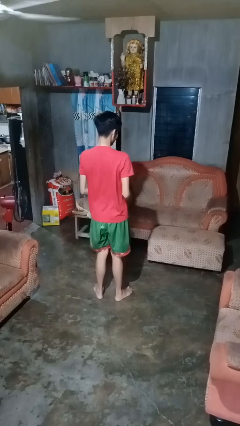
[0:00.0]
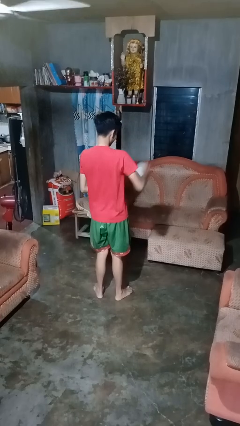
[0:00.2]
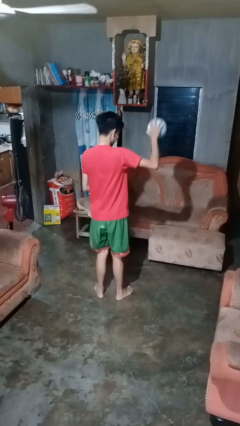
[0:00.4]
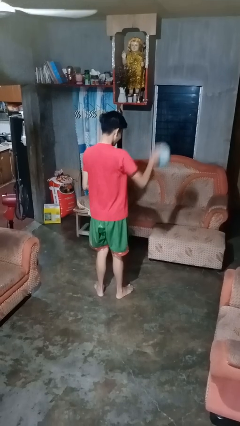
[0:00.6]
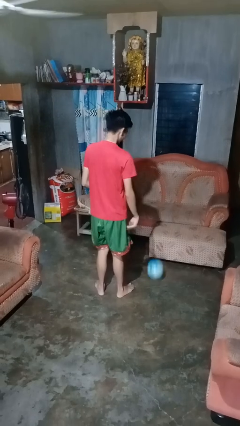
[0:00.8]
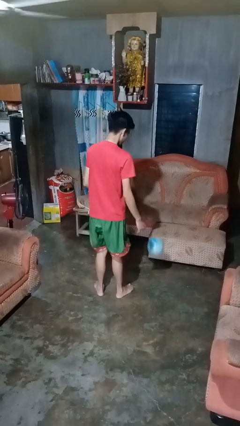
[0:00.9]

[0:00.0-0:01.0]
person bounces ball on floor

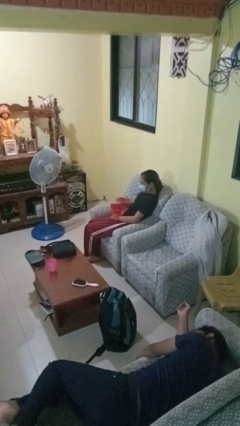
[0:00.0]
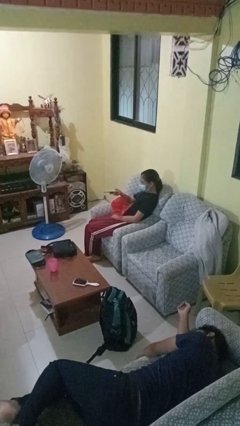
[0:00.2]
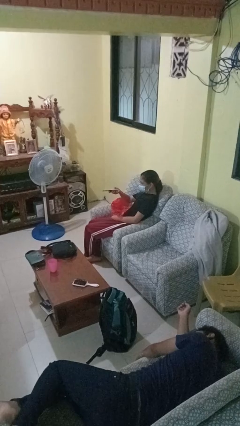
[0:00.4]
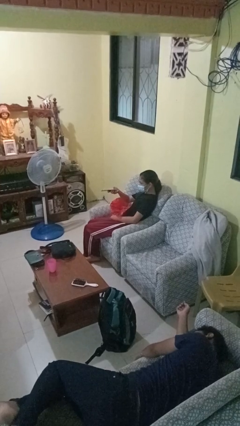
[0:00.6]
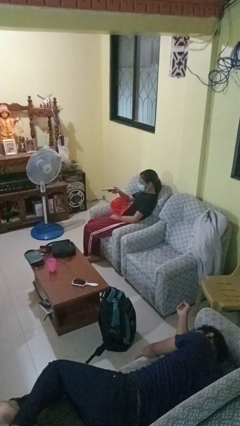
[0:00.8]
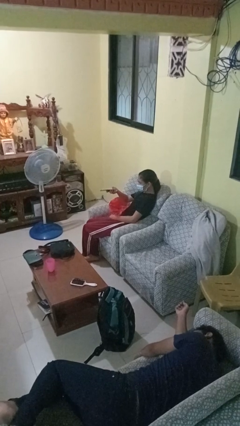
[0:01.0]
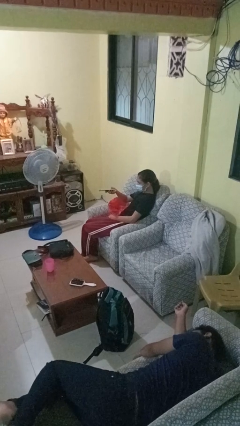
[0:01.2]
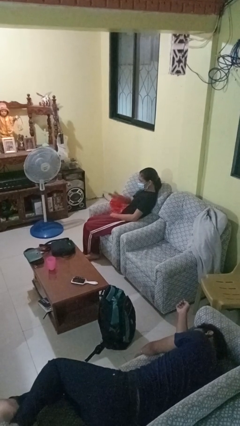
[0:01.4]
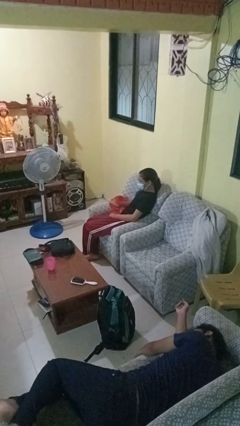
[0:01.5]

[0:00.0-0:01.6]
person uses television remote

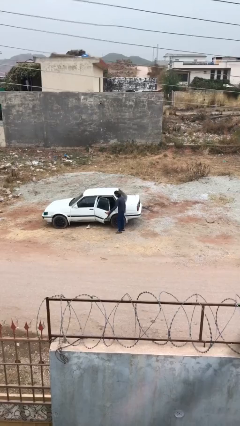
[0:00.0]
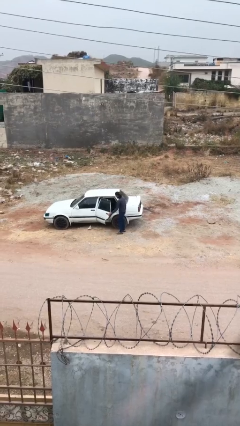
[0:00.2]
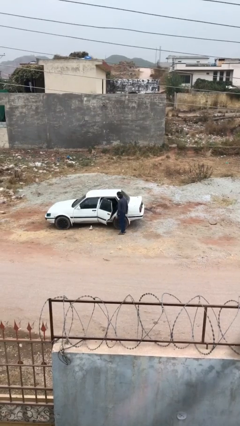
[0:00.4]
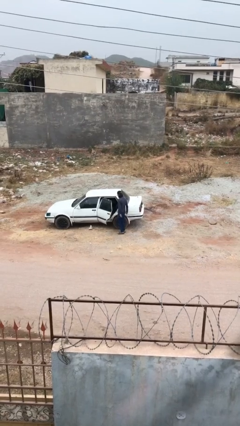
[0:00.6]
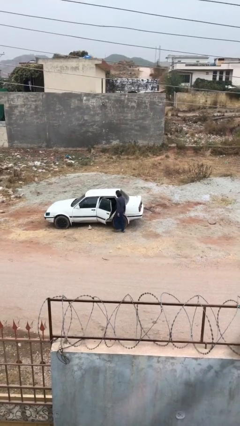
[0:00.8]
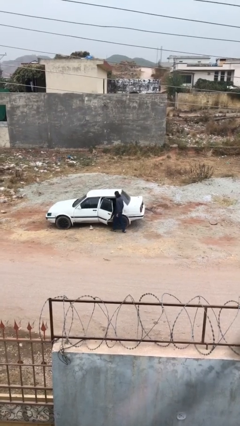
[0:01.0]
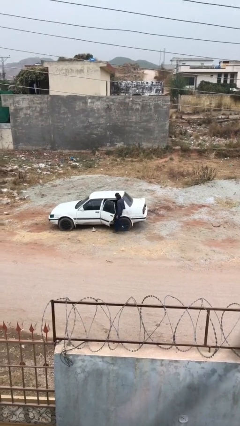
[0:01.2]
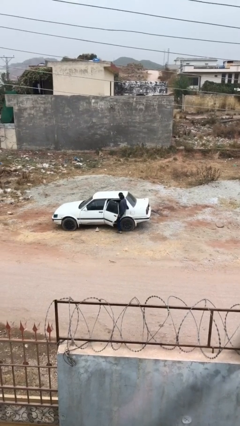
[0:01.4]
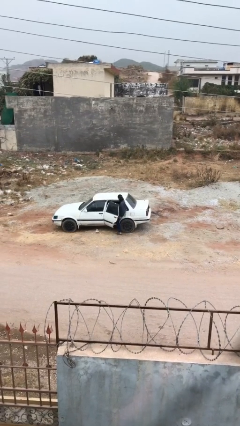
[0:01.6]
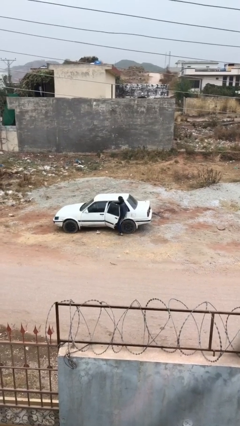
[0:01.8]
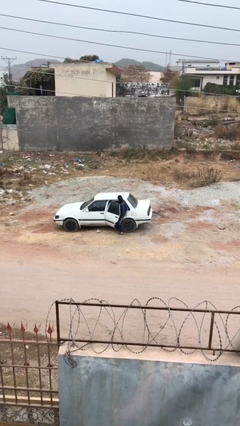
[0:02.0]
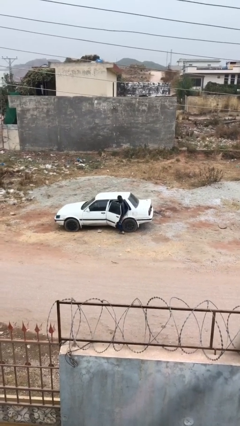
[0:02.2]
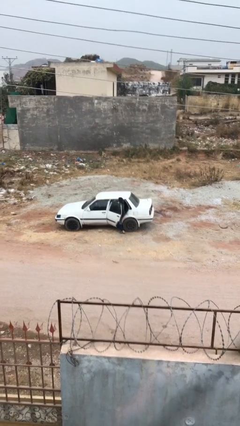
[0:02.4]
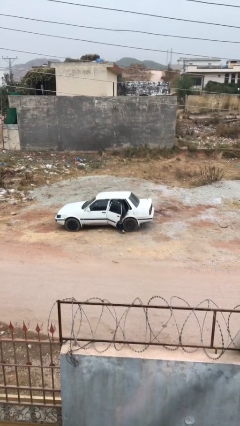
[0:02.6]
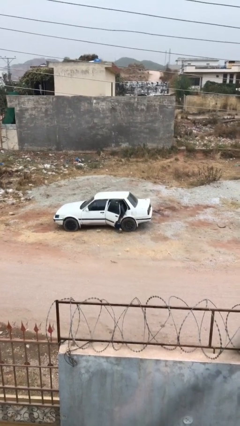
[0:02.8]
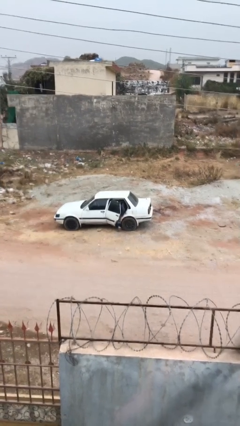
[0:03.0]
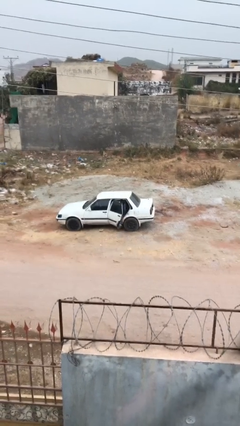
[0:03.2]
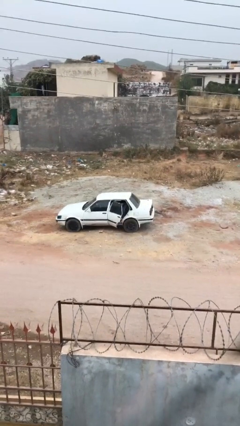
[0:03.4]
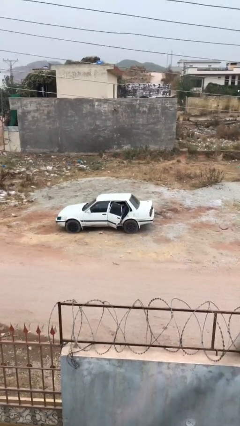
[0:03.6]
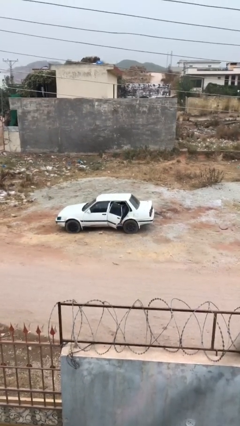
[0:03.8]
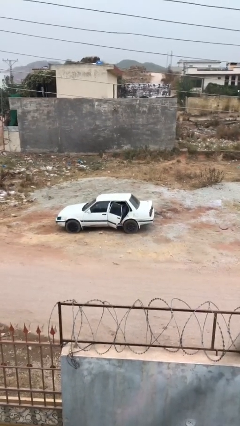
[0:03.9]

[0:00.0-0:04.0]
person enters car

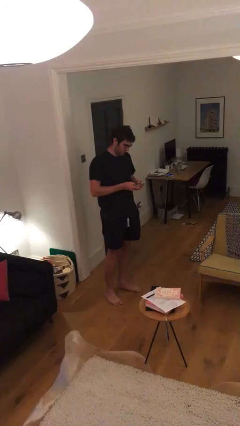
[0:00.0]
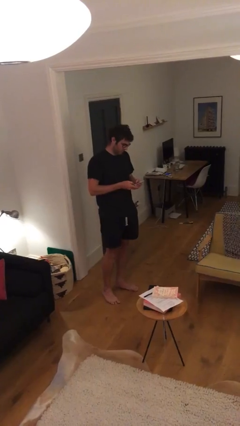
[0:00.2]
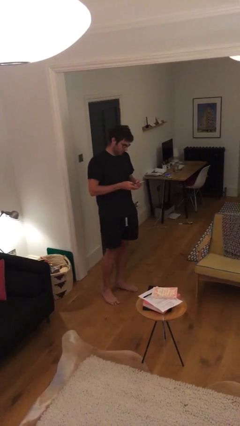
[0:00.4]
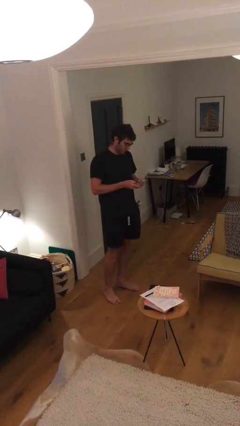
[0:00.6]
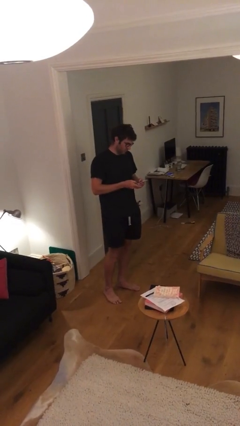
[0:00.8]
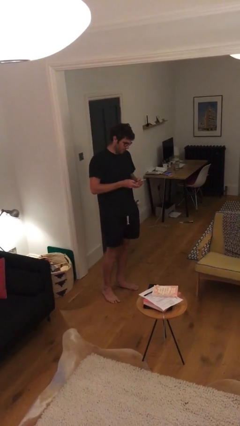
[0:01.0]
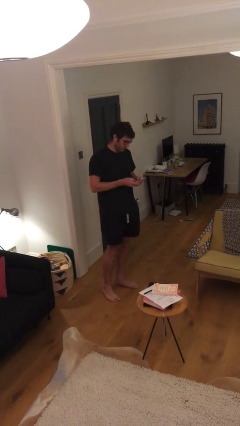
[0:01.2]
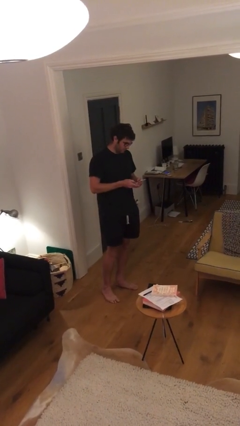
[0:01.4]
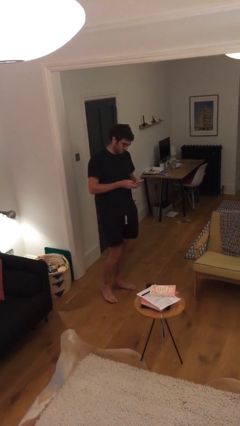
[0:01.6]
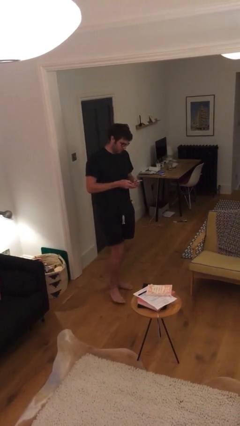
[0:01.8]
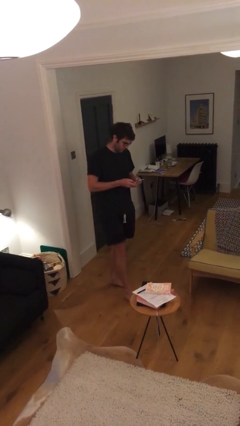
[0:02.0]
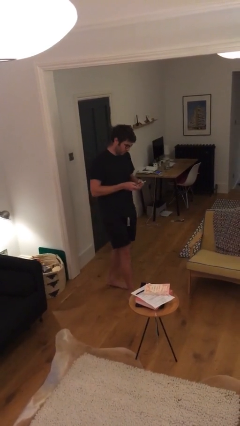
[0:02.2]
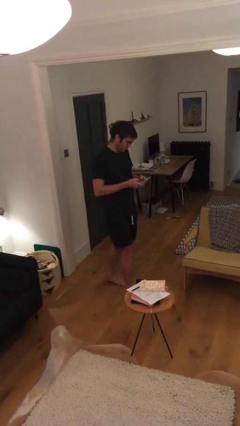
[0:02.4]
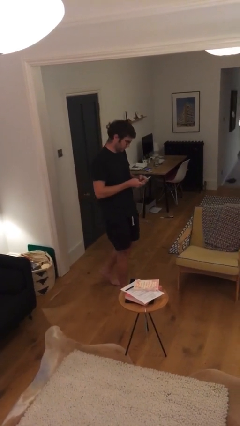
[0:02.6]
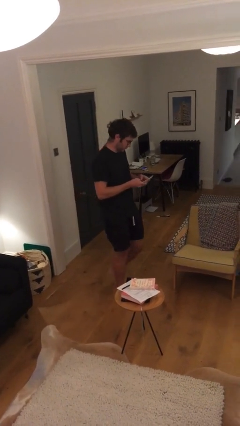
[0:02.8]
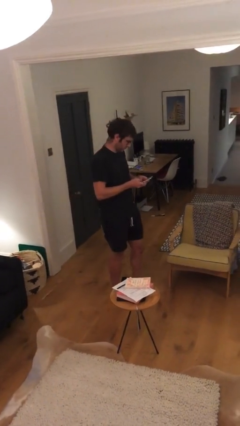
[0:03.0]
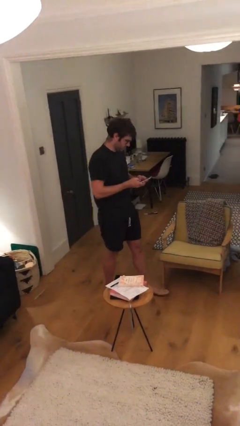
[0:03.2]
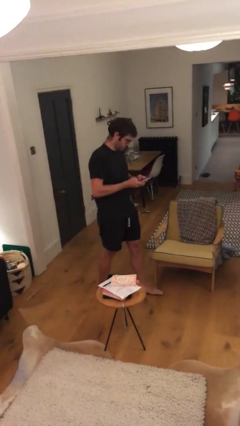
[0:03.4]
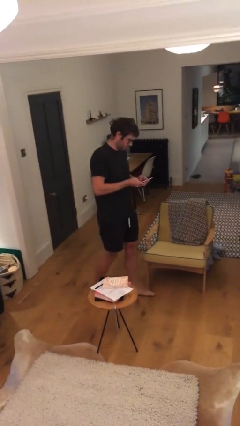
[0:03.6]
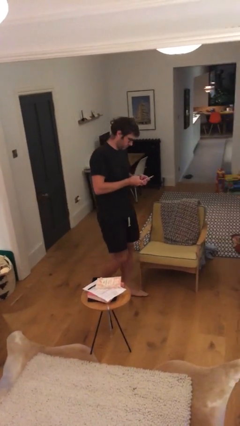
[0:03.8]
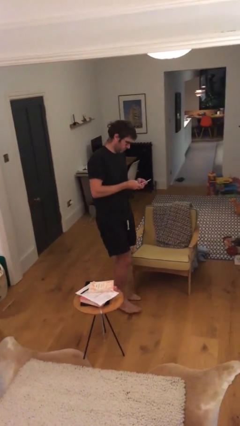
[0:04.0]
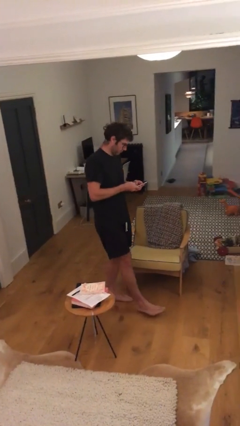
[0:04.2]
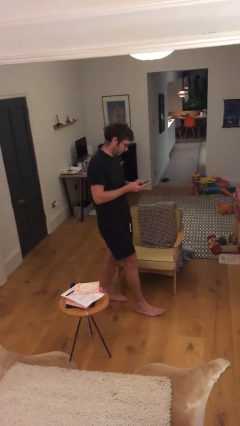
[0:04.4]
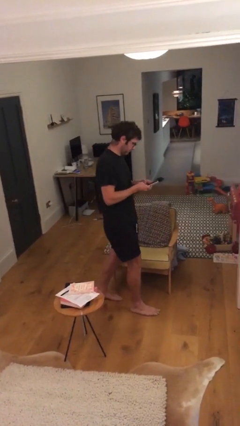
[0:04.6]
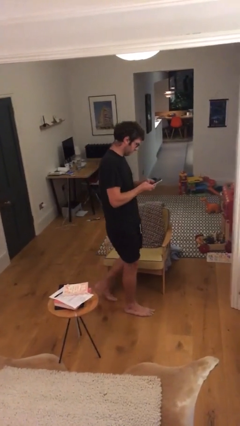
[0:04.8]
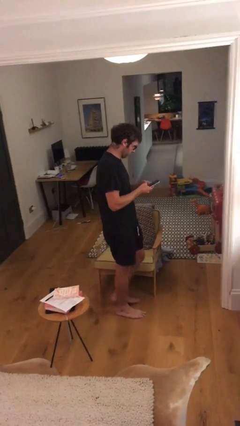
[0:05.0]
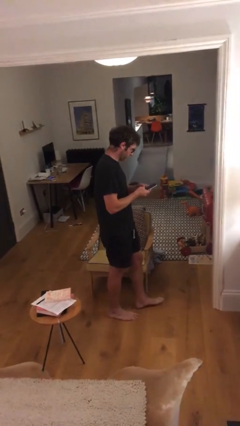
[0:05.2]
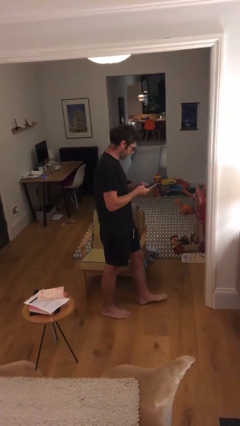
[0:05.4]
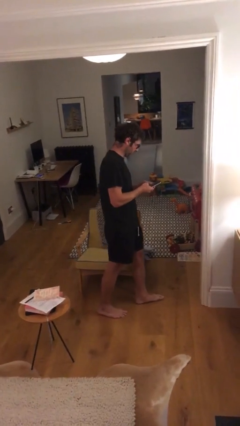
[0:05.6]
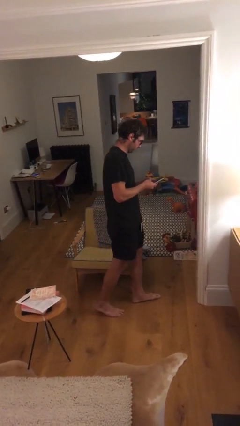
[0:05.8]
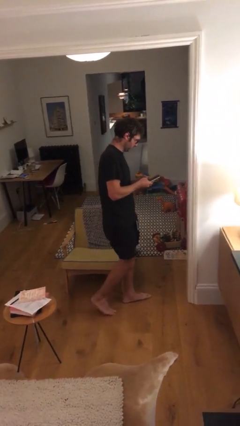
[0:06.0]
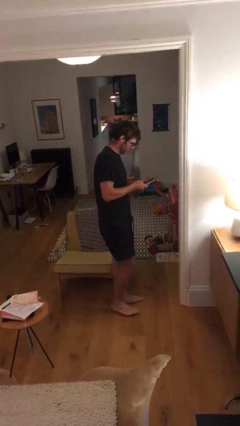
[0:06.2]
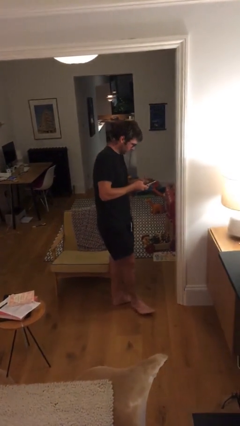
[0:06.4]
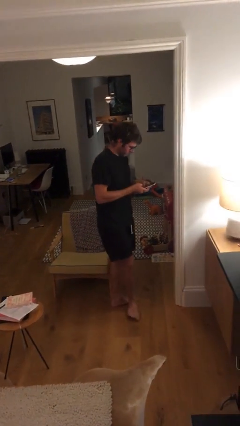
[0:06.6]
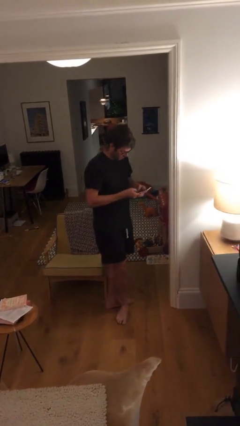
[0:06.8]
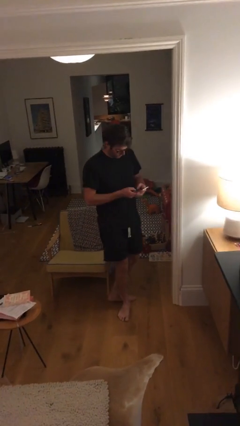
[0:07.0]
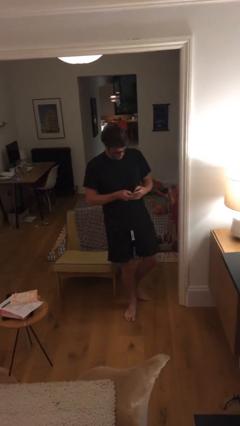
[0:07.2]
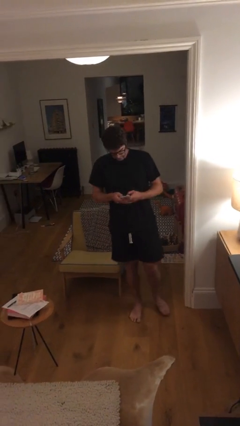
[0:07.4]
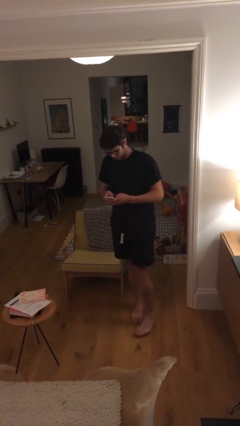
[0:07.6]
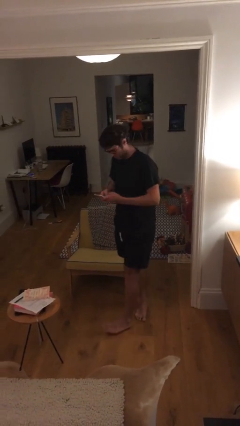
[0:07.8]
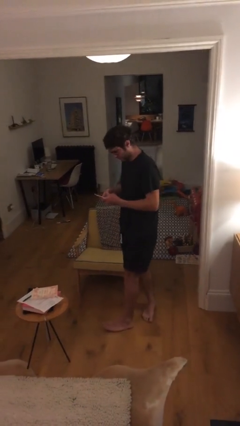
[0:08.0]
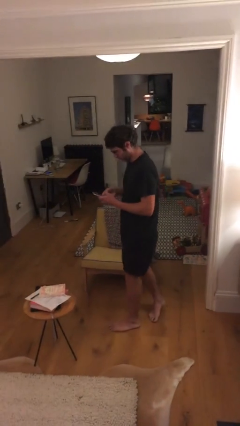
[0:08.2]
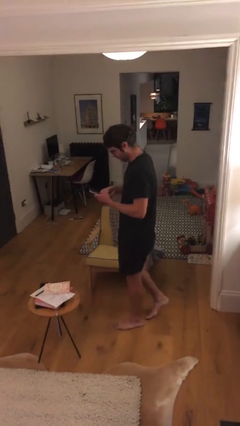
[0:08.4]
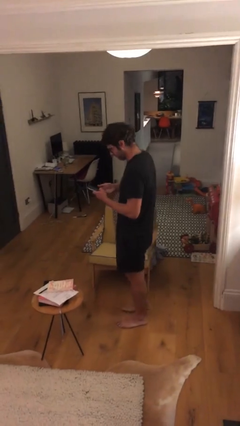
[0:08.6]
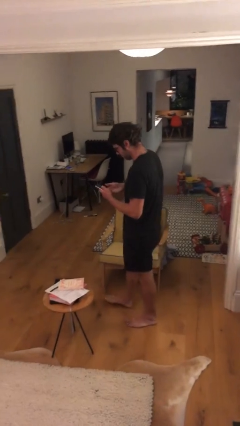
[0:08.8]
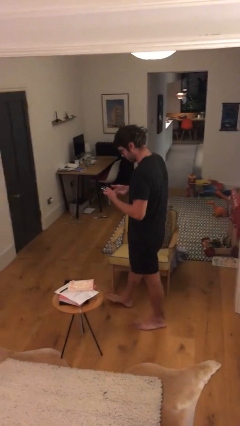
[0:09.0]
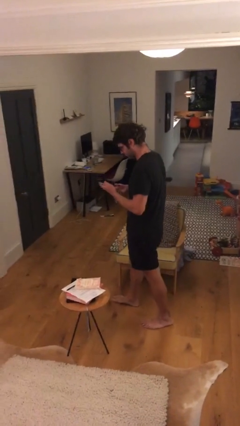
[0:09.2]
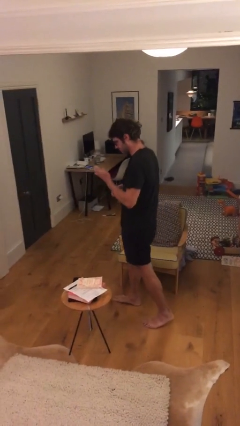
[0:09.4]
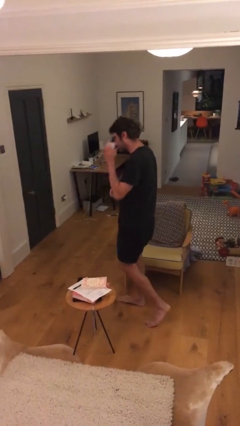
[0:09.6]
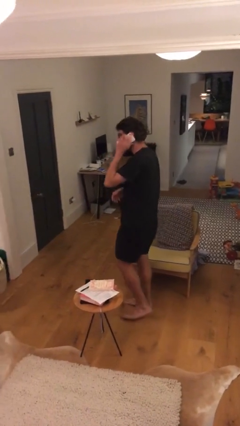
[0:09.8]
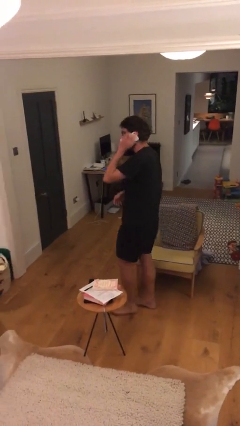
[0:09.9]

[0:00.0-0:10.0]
person texts on phone

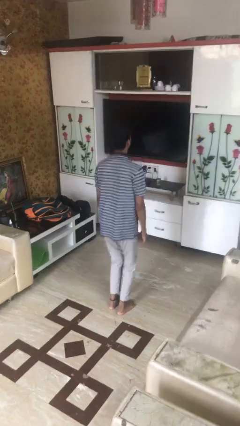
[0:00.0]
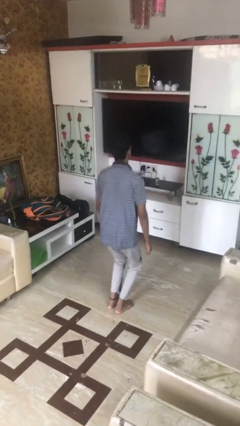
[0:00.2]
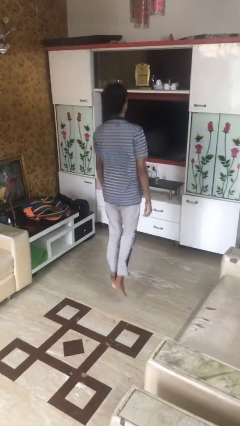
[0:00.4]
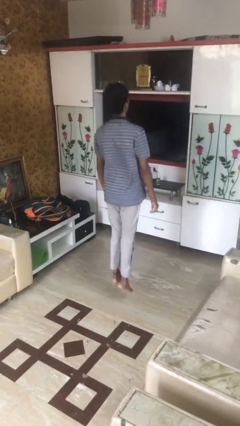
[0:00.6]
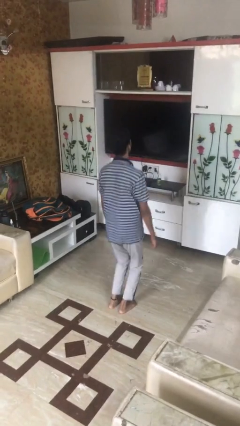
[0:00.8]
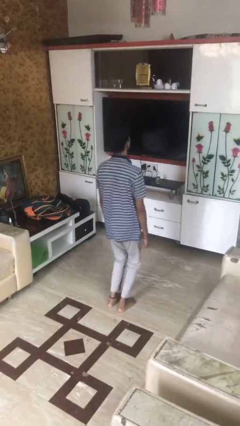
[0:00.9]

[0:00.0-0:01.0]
person jumps

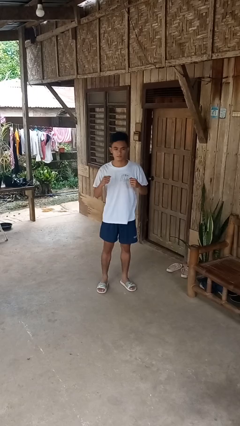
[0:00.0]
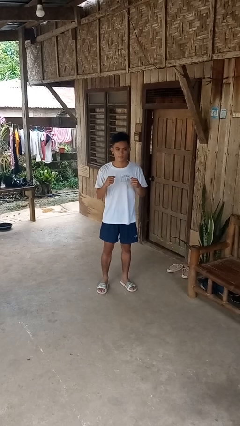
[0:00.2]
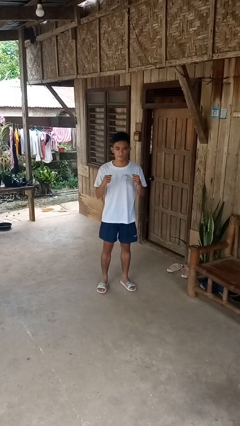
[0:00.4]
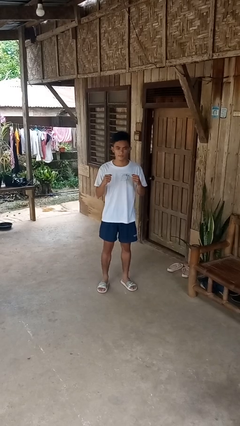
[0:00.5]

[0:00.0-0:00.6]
person punches
